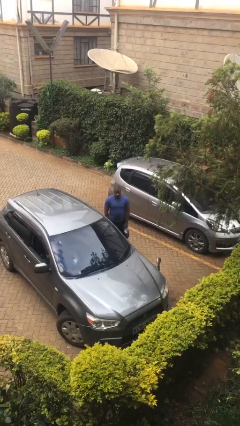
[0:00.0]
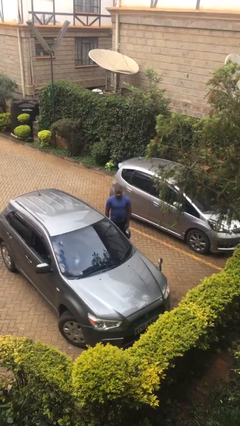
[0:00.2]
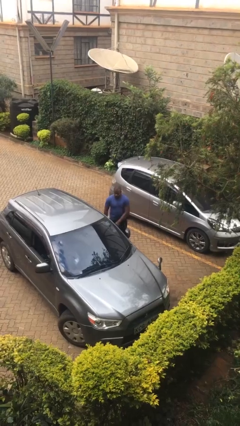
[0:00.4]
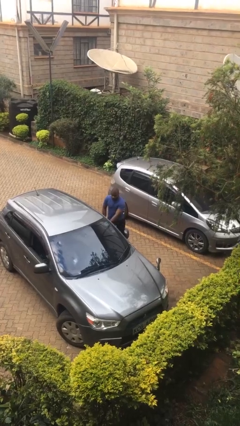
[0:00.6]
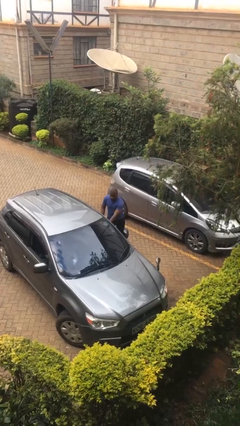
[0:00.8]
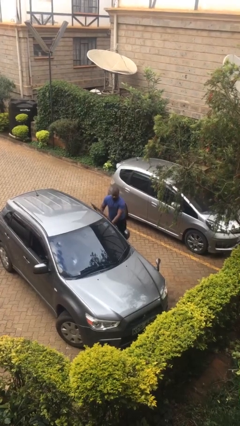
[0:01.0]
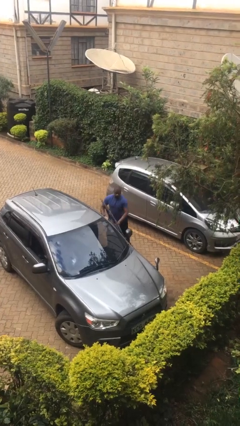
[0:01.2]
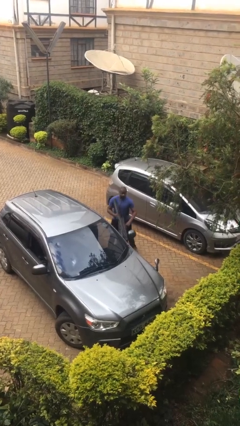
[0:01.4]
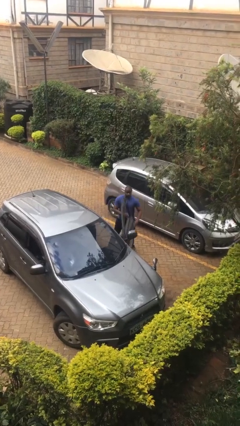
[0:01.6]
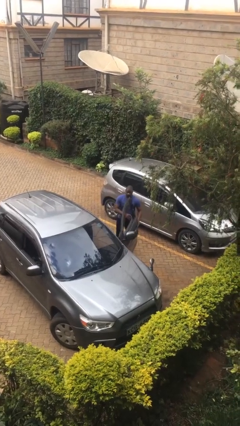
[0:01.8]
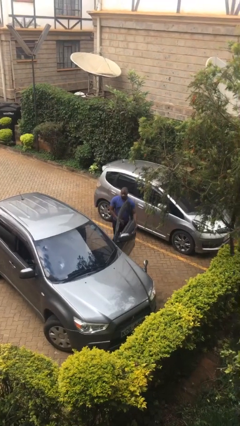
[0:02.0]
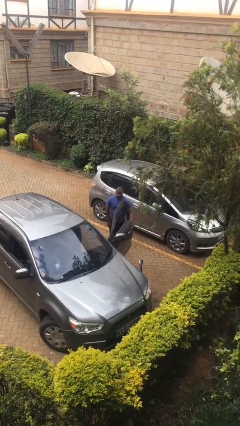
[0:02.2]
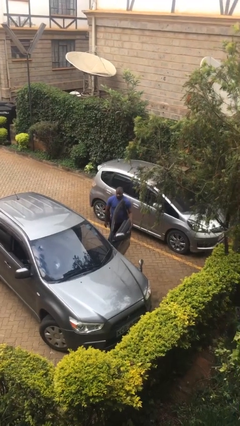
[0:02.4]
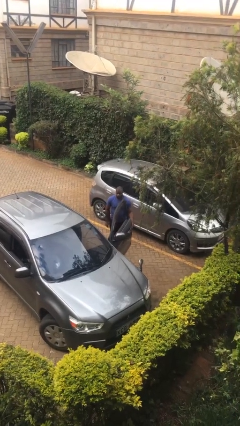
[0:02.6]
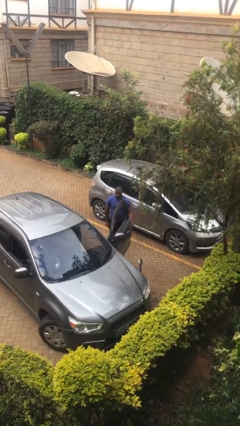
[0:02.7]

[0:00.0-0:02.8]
person opens car door

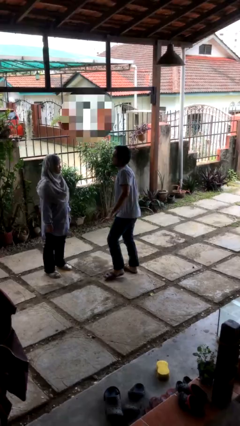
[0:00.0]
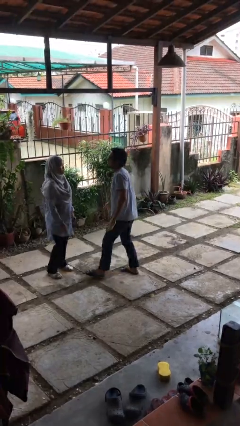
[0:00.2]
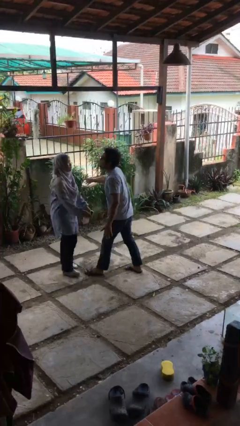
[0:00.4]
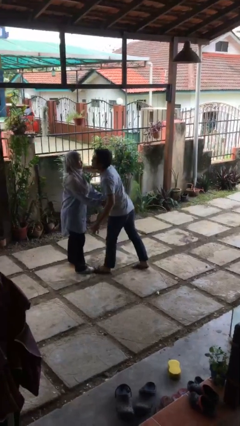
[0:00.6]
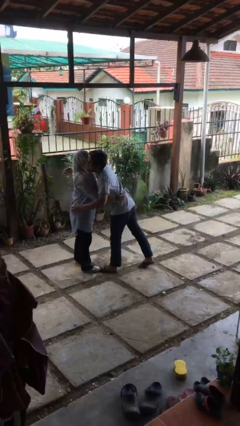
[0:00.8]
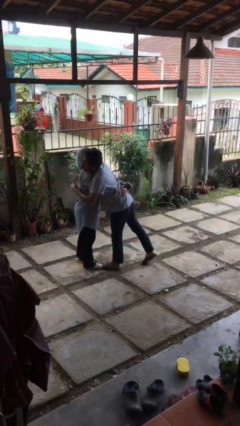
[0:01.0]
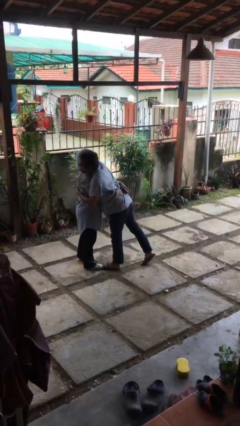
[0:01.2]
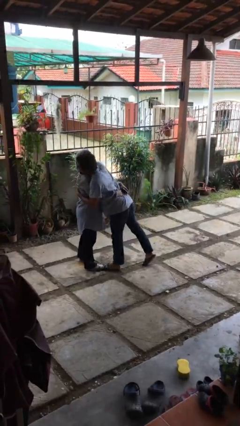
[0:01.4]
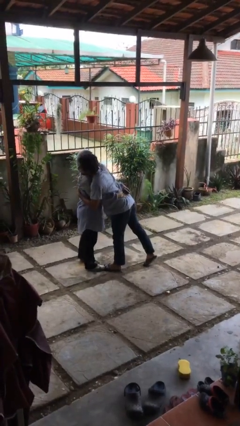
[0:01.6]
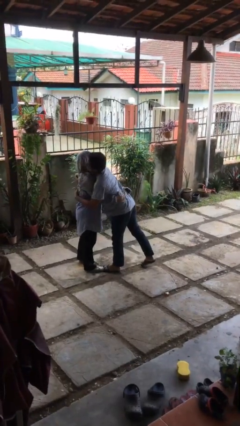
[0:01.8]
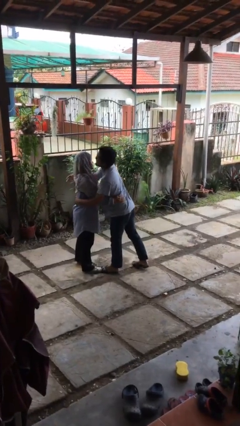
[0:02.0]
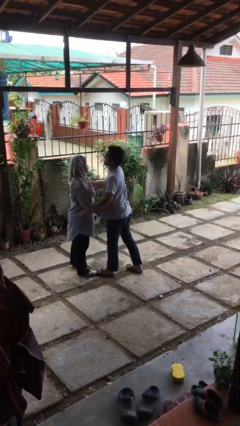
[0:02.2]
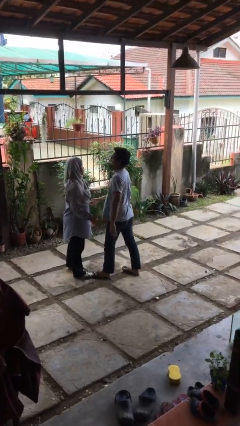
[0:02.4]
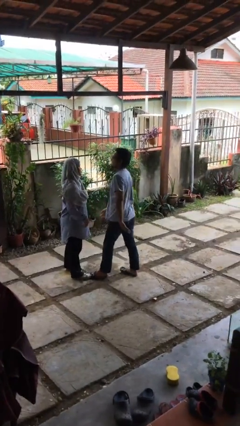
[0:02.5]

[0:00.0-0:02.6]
person embraces person

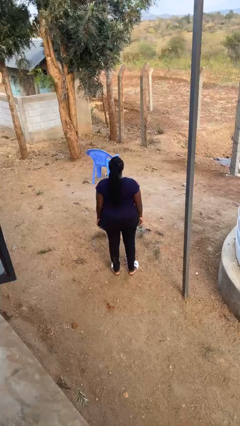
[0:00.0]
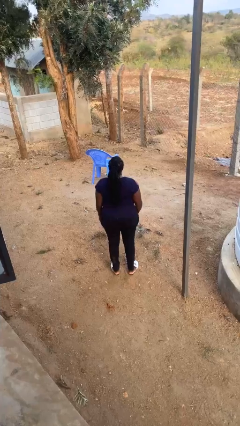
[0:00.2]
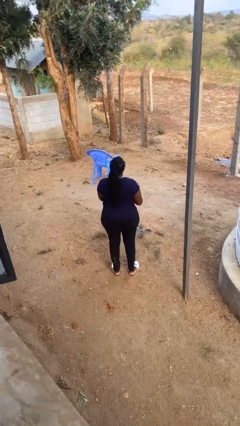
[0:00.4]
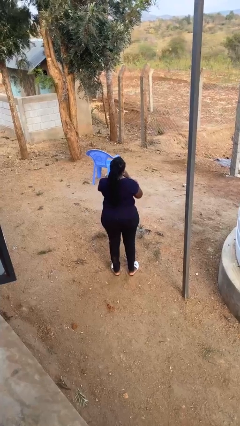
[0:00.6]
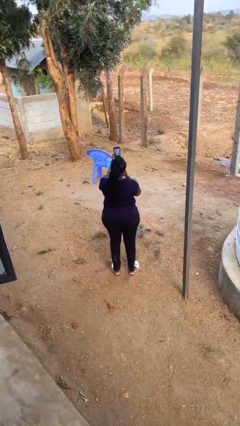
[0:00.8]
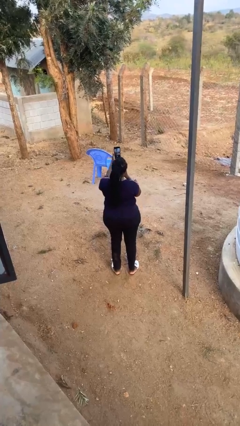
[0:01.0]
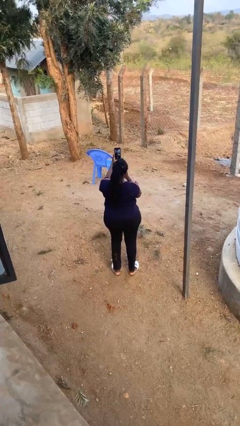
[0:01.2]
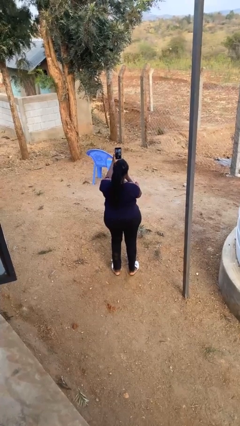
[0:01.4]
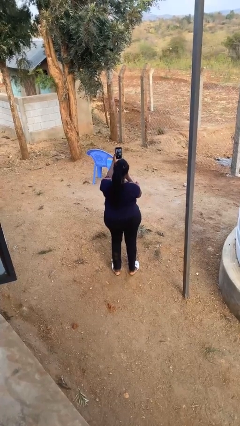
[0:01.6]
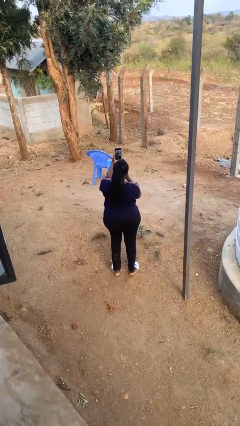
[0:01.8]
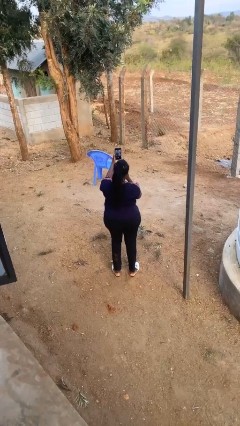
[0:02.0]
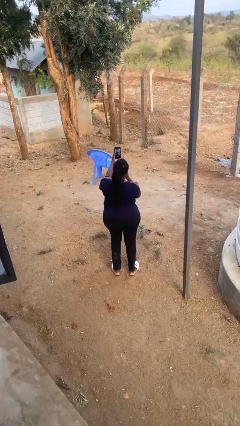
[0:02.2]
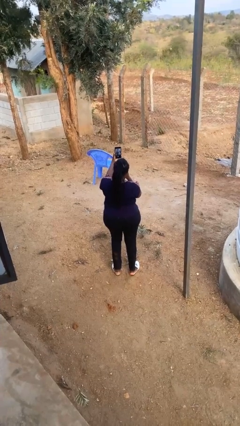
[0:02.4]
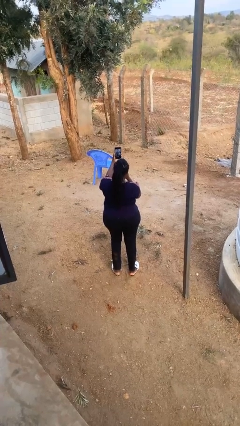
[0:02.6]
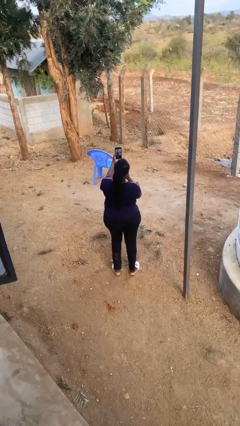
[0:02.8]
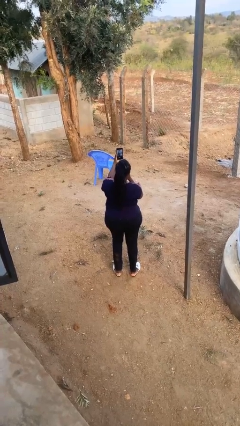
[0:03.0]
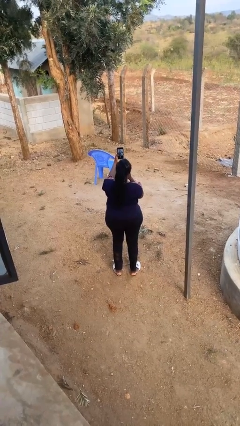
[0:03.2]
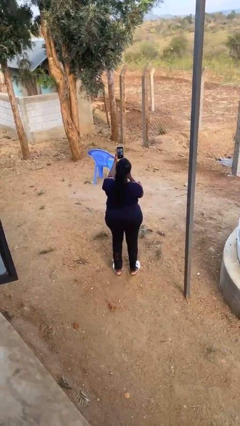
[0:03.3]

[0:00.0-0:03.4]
person takes selfie

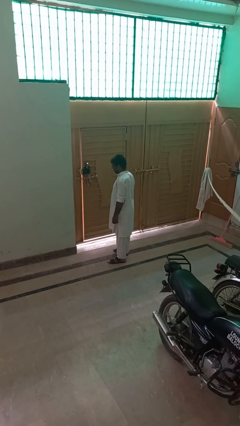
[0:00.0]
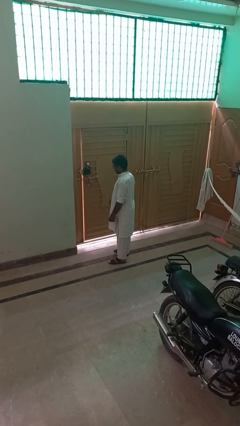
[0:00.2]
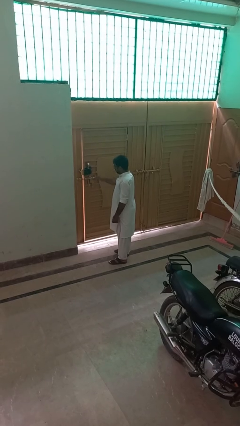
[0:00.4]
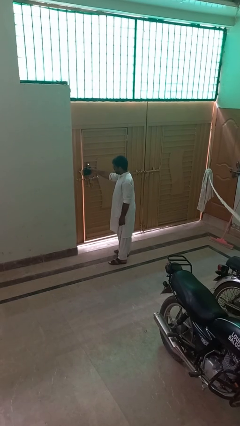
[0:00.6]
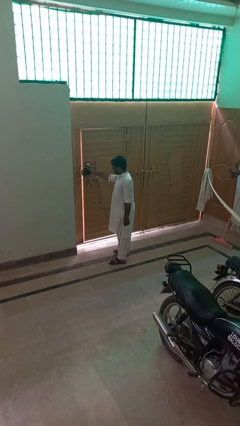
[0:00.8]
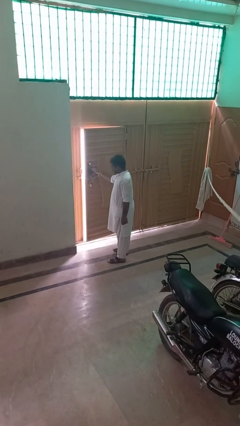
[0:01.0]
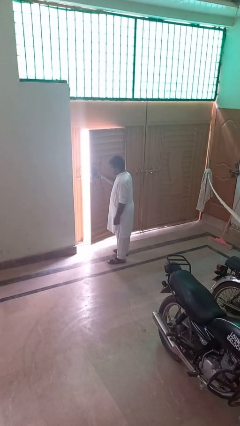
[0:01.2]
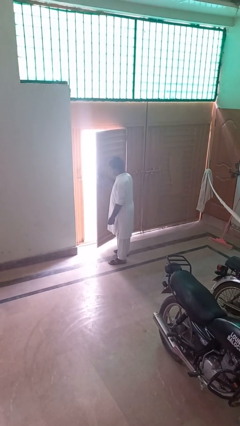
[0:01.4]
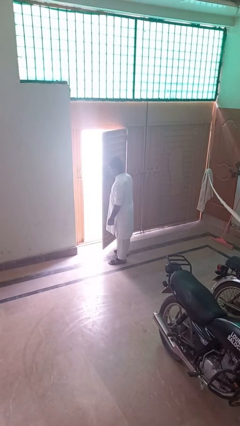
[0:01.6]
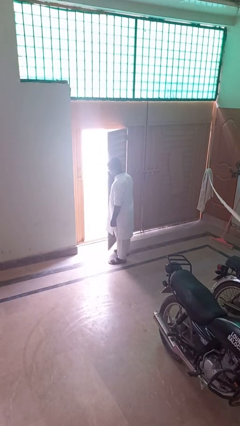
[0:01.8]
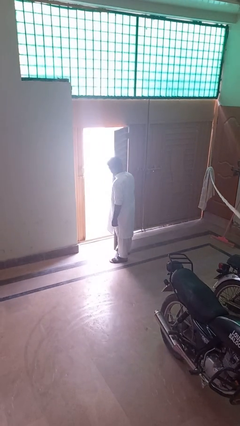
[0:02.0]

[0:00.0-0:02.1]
person opens gate

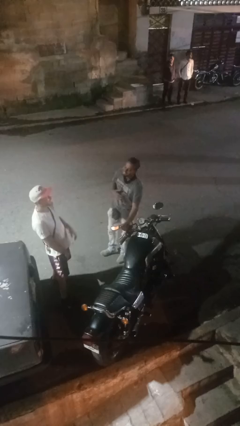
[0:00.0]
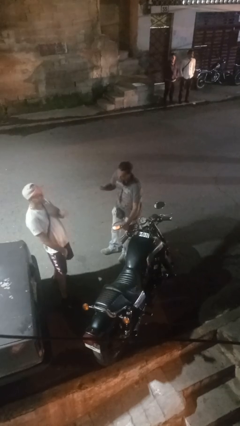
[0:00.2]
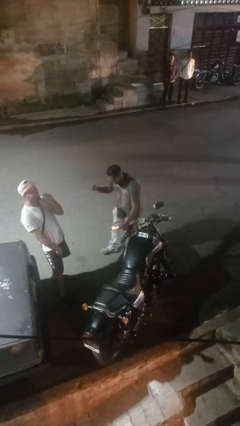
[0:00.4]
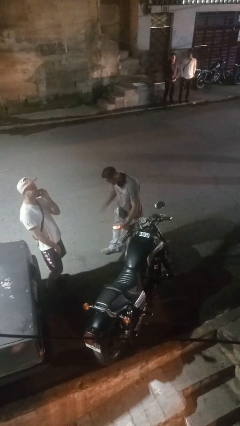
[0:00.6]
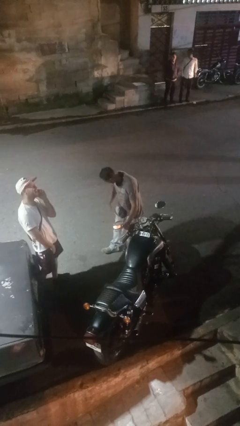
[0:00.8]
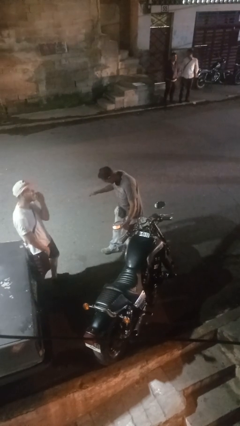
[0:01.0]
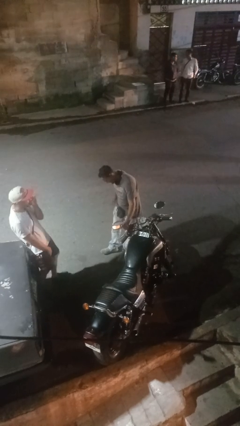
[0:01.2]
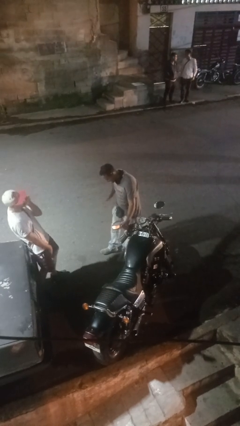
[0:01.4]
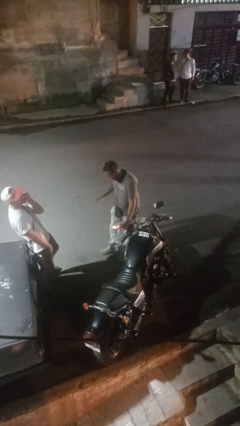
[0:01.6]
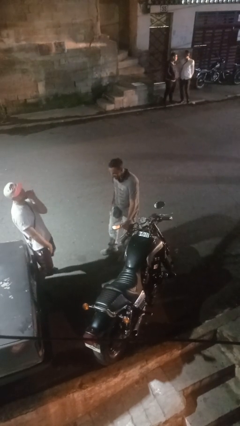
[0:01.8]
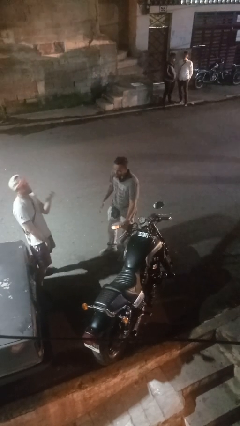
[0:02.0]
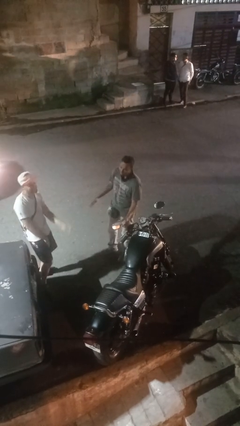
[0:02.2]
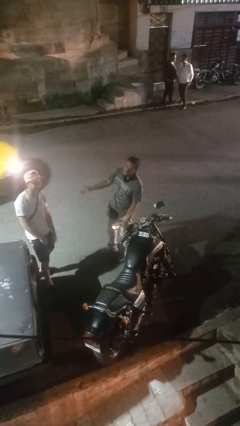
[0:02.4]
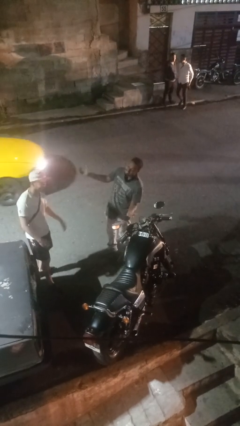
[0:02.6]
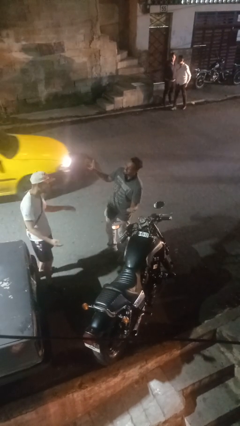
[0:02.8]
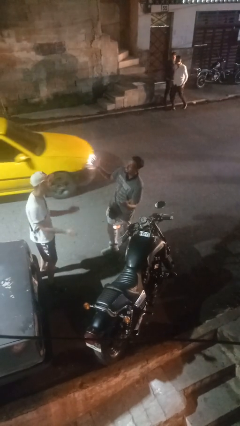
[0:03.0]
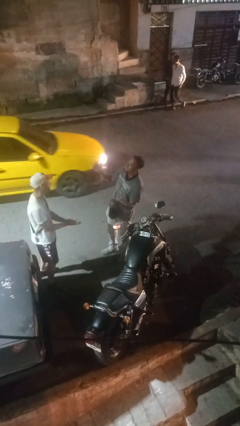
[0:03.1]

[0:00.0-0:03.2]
person laughs with person

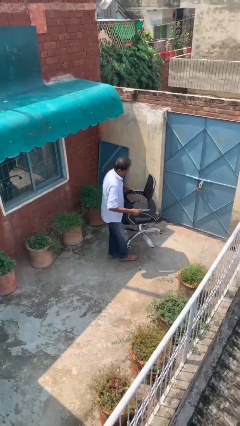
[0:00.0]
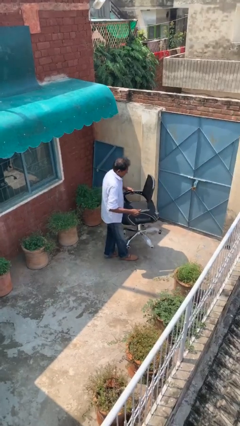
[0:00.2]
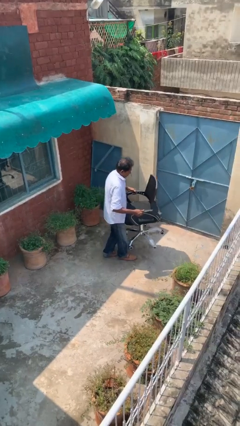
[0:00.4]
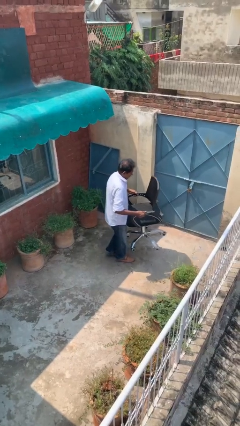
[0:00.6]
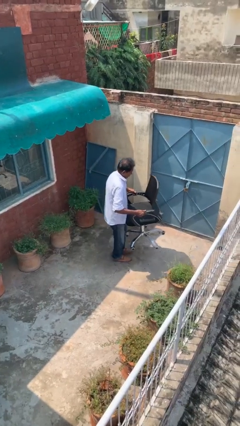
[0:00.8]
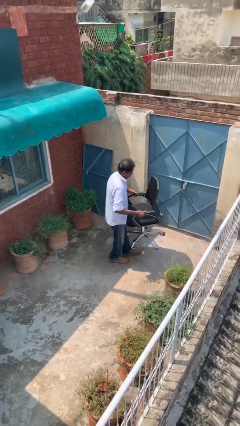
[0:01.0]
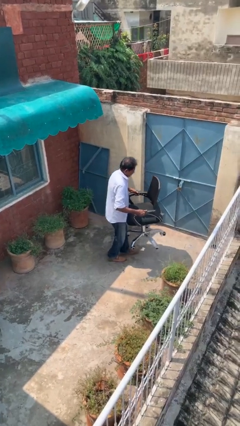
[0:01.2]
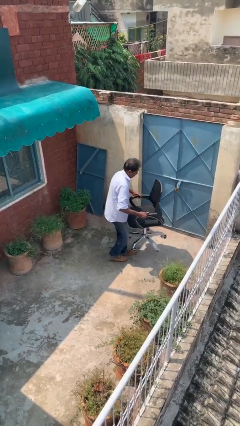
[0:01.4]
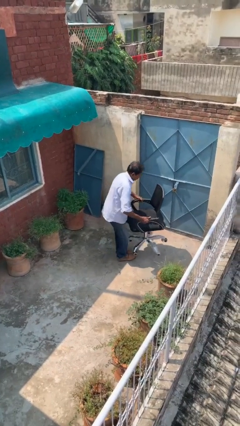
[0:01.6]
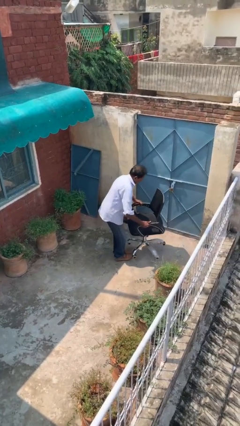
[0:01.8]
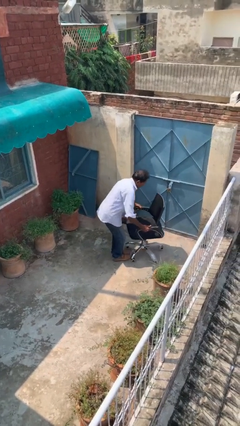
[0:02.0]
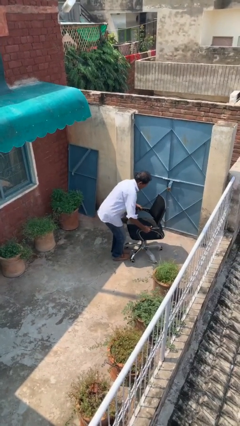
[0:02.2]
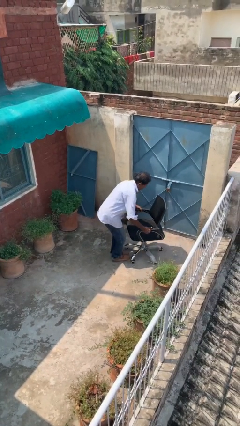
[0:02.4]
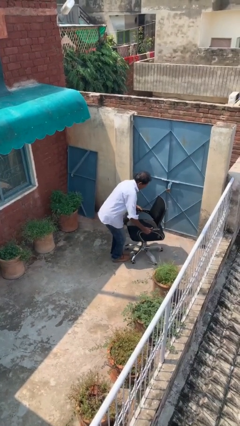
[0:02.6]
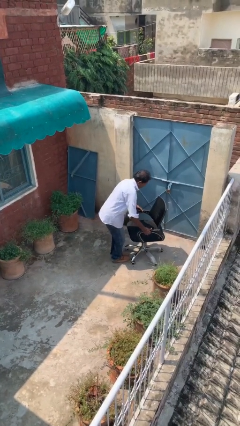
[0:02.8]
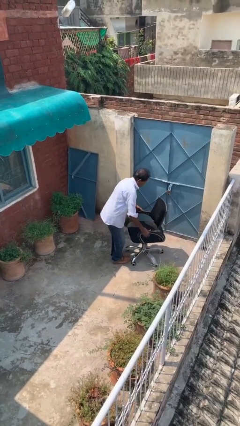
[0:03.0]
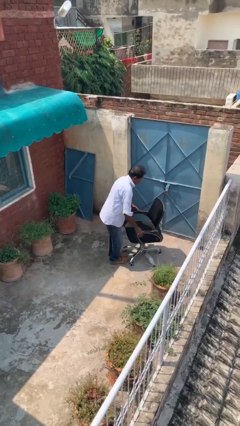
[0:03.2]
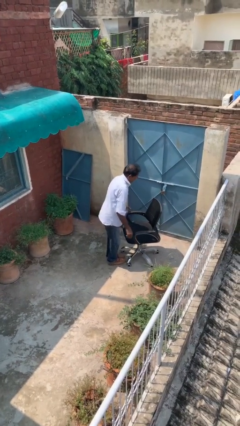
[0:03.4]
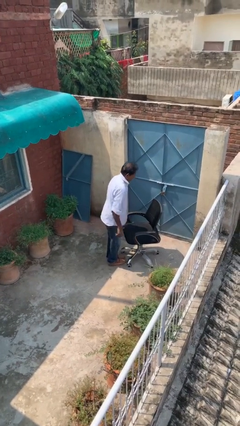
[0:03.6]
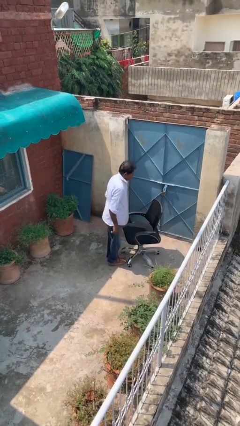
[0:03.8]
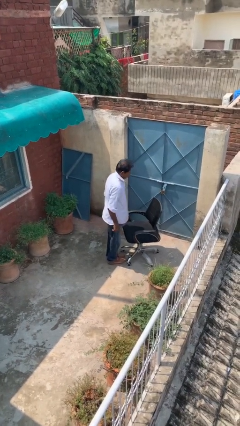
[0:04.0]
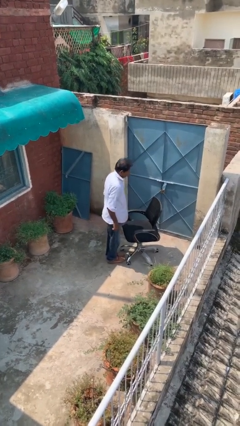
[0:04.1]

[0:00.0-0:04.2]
person puts down object on floor
